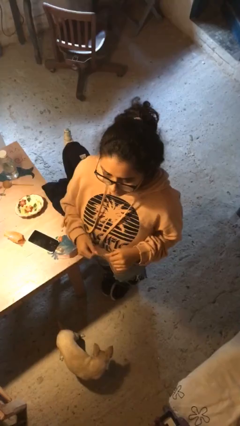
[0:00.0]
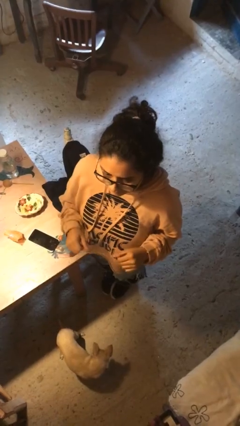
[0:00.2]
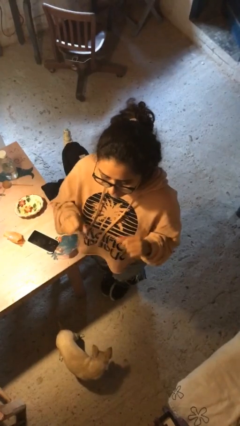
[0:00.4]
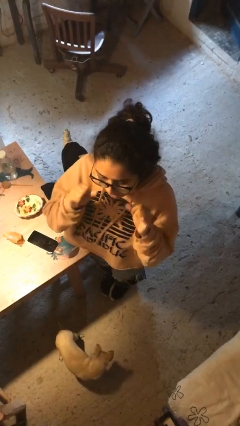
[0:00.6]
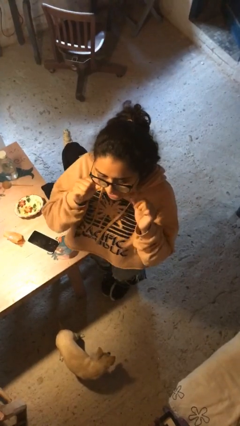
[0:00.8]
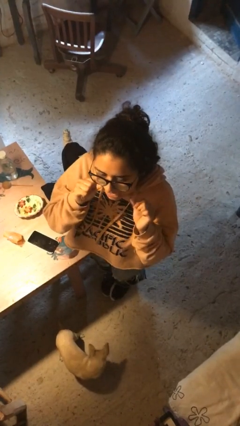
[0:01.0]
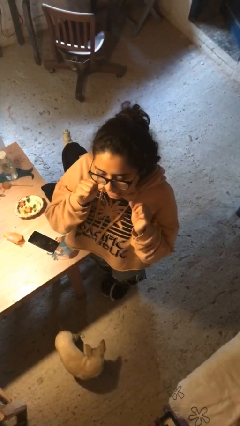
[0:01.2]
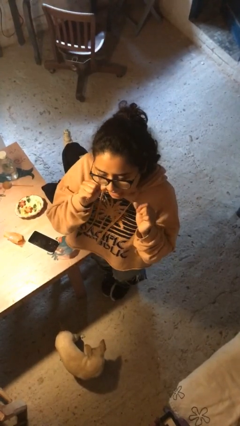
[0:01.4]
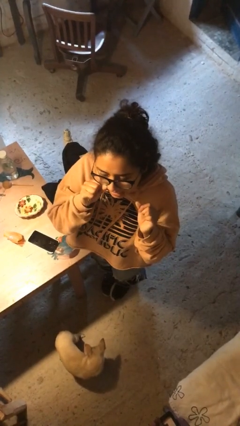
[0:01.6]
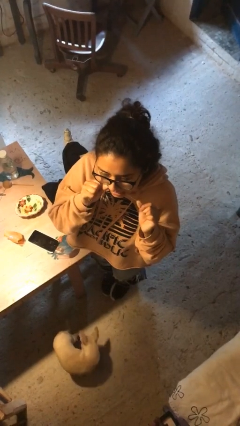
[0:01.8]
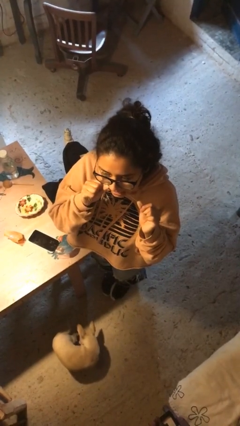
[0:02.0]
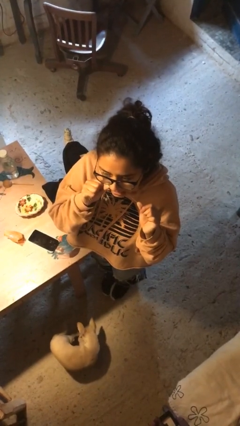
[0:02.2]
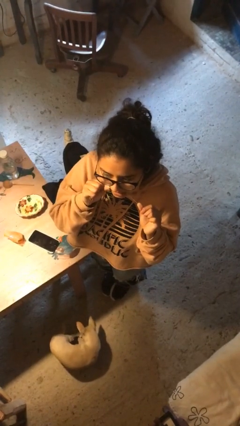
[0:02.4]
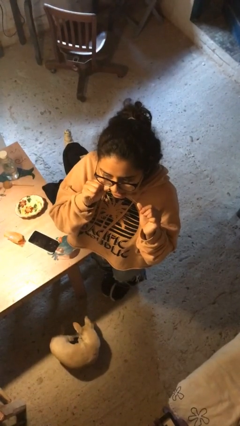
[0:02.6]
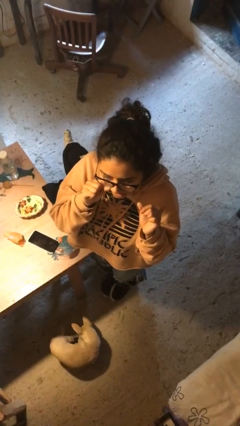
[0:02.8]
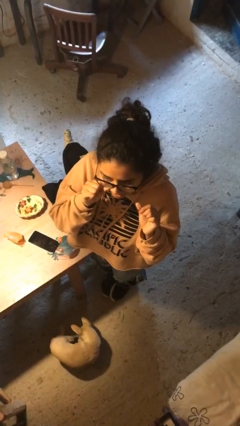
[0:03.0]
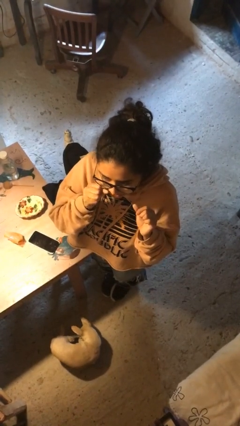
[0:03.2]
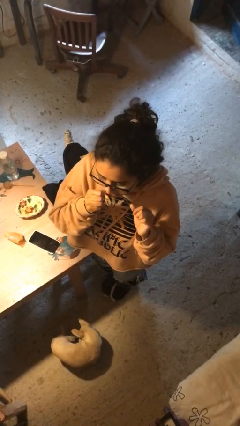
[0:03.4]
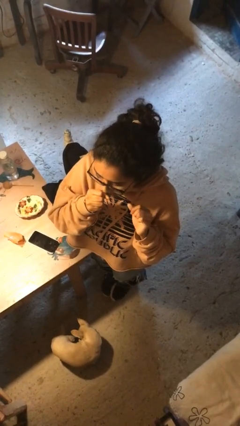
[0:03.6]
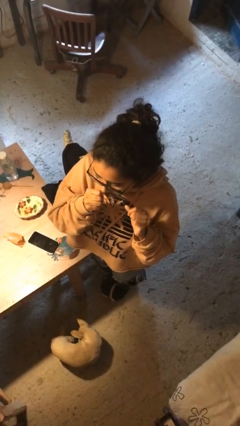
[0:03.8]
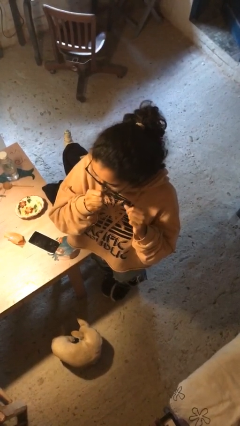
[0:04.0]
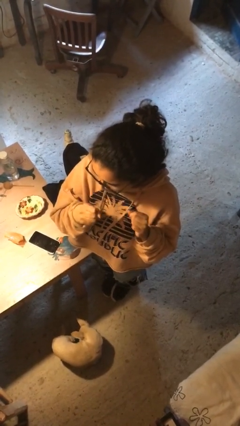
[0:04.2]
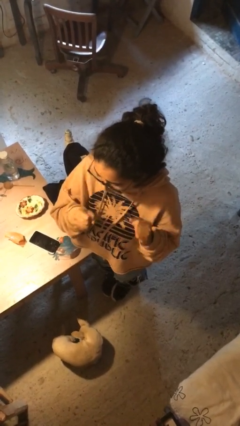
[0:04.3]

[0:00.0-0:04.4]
person flosses

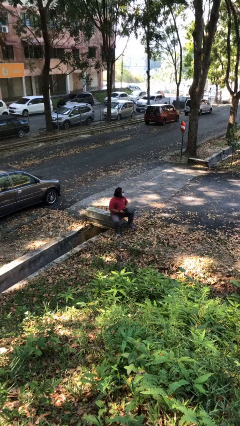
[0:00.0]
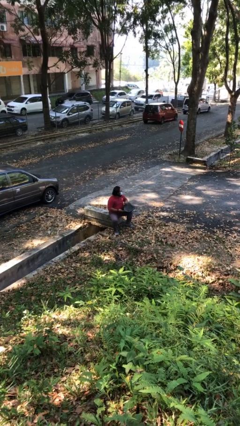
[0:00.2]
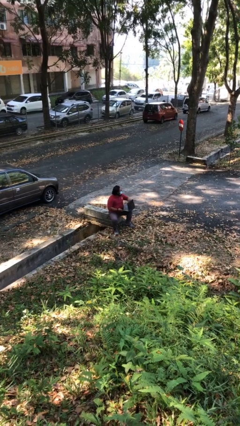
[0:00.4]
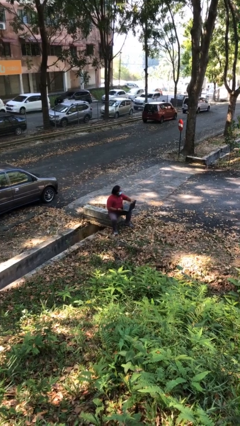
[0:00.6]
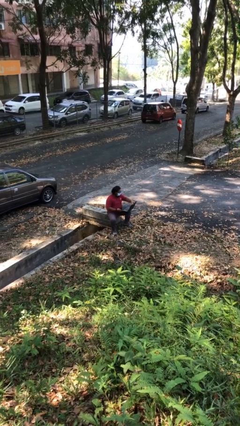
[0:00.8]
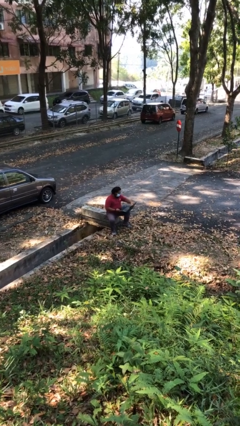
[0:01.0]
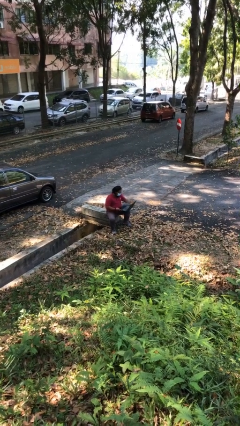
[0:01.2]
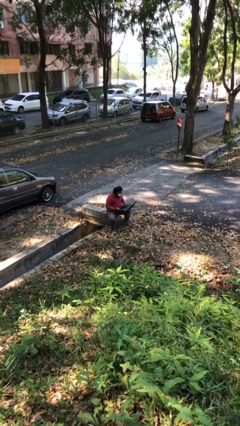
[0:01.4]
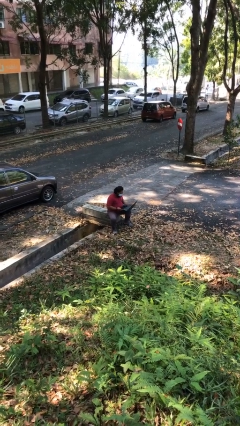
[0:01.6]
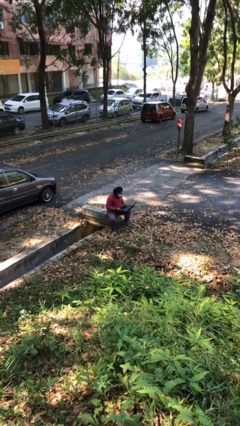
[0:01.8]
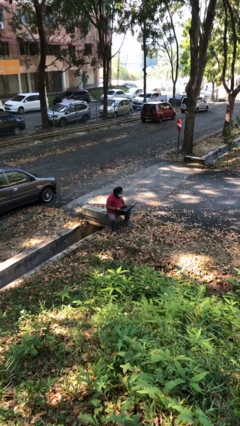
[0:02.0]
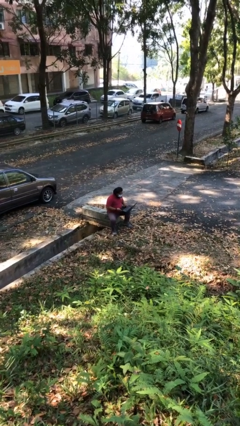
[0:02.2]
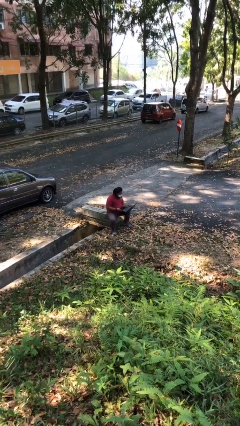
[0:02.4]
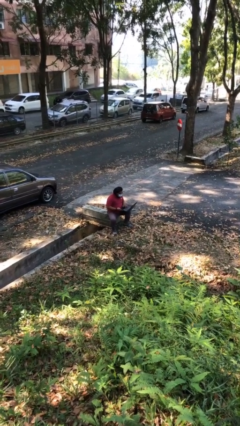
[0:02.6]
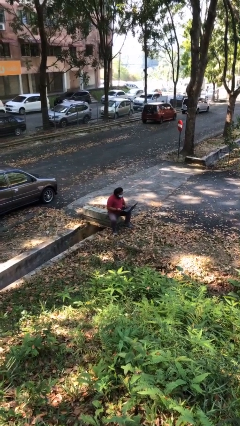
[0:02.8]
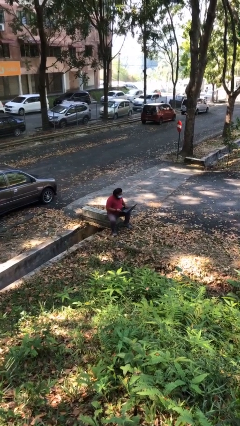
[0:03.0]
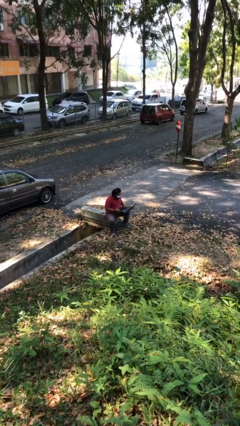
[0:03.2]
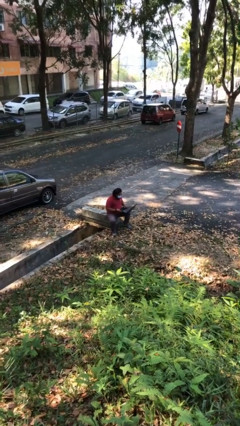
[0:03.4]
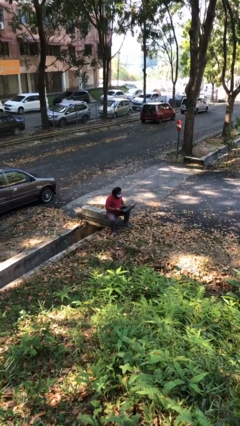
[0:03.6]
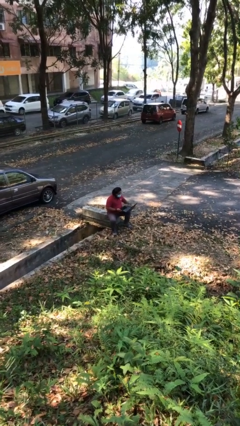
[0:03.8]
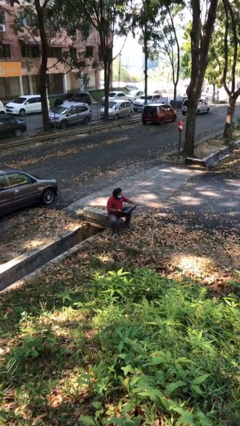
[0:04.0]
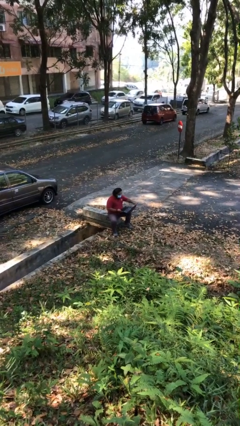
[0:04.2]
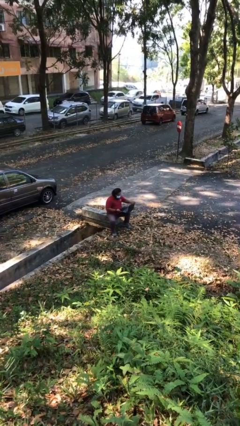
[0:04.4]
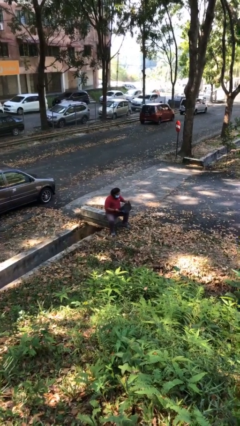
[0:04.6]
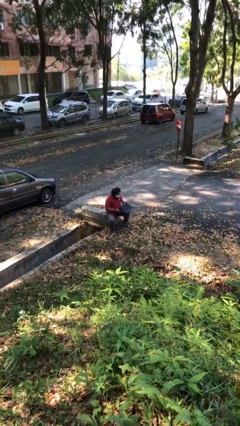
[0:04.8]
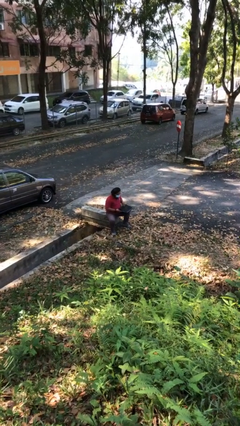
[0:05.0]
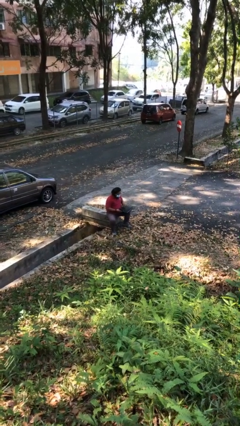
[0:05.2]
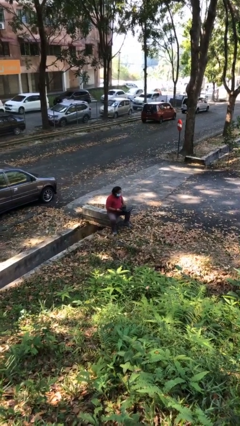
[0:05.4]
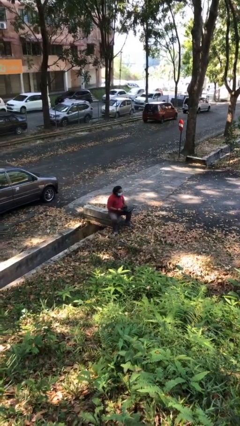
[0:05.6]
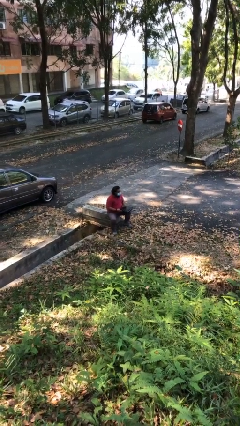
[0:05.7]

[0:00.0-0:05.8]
person interacts with laptop

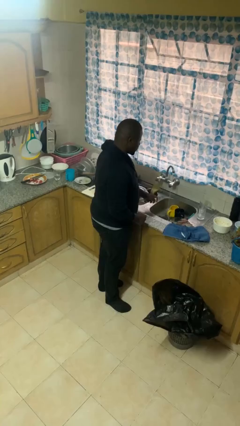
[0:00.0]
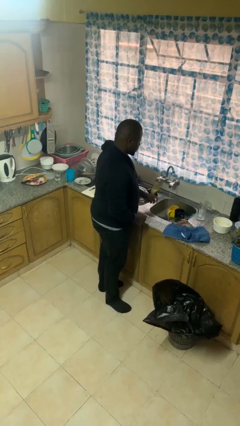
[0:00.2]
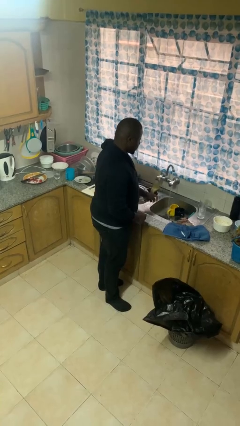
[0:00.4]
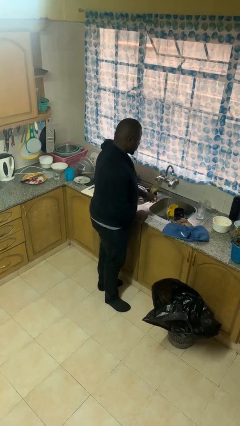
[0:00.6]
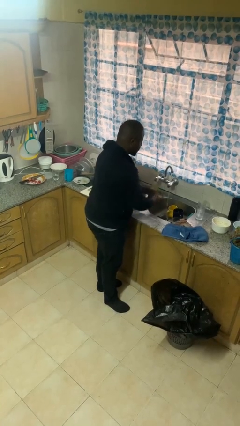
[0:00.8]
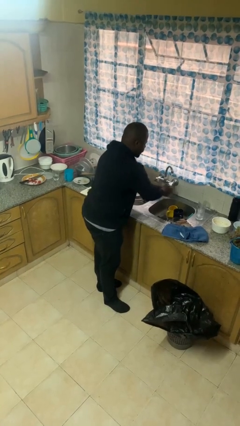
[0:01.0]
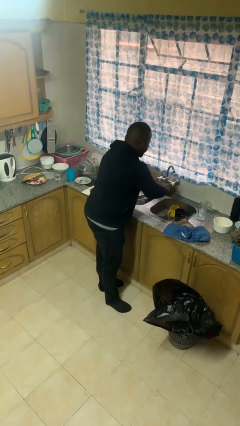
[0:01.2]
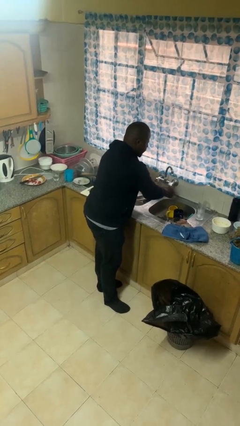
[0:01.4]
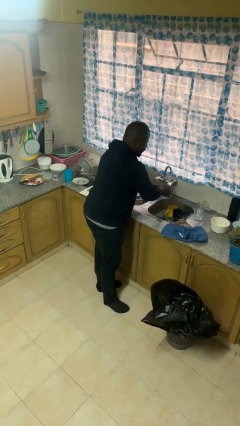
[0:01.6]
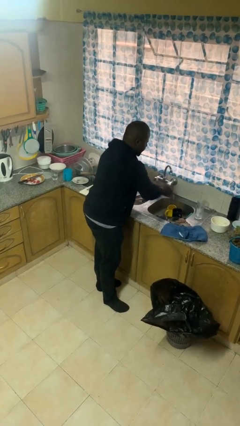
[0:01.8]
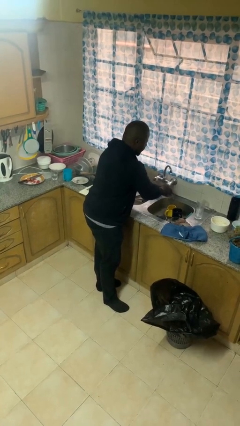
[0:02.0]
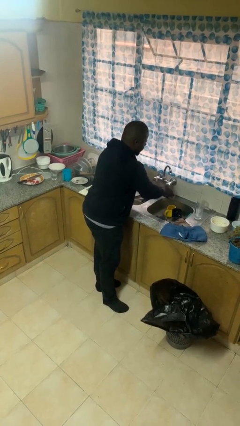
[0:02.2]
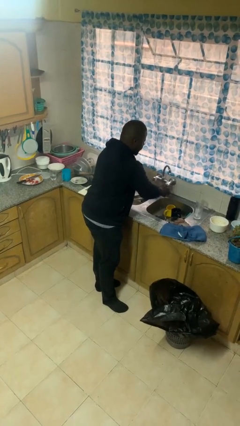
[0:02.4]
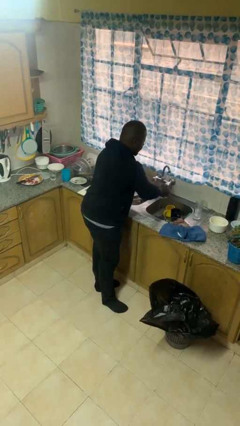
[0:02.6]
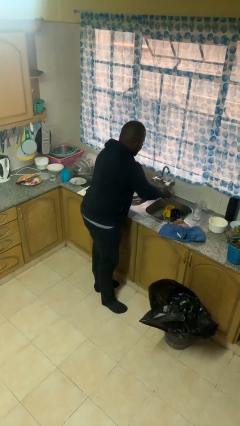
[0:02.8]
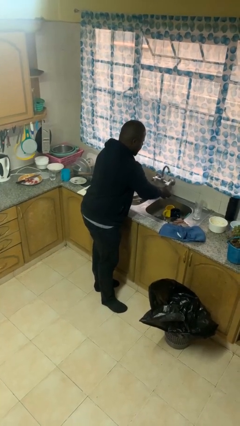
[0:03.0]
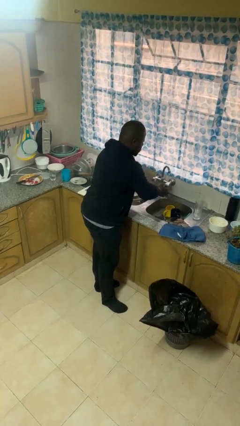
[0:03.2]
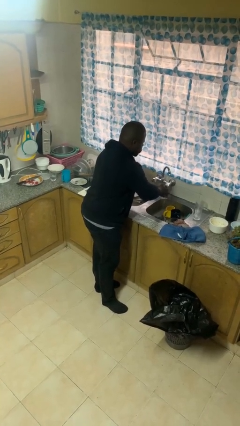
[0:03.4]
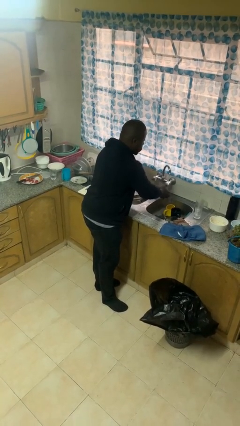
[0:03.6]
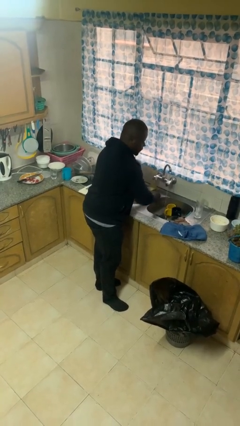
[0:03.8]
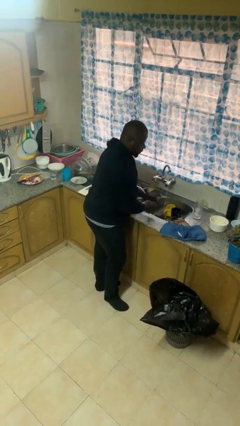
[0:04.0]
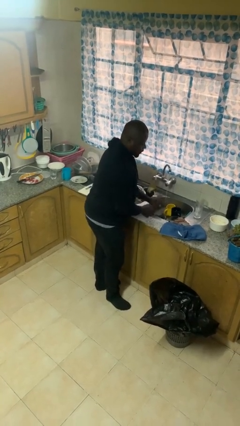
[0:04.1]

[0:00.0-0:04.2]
person washes hands

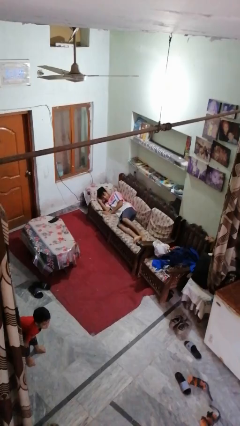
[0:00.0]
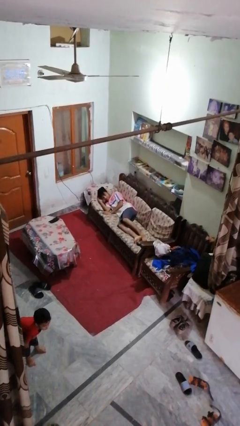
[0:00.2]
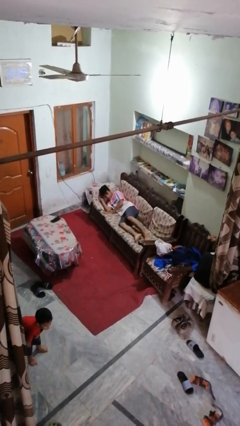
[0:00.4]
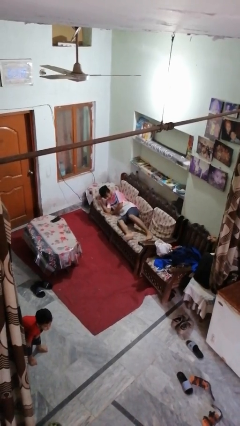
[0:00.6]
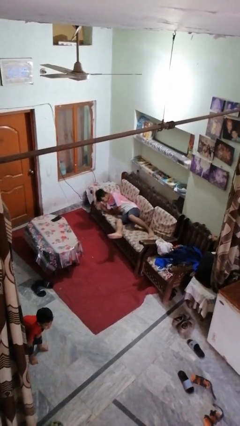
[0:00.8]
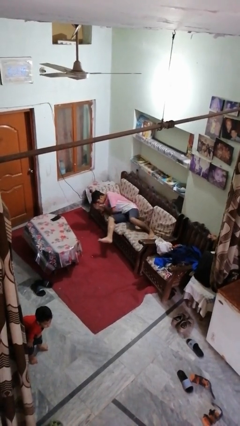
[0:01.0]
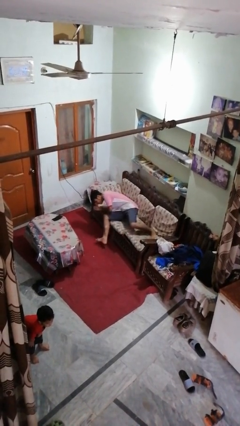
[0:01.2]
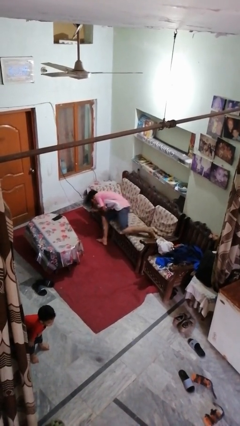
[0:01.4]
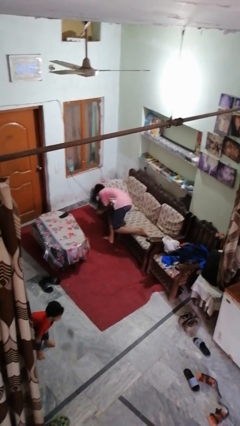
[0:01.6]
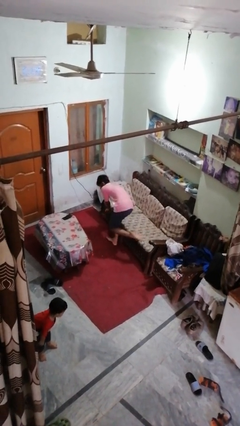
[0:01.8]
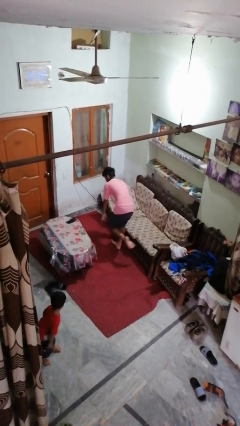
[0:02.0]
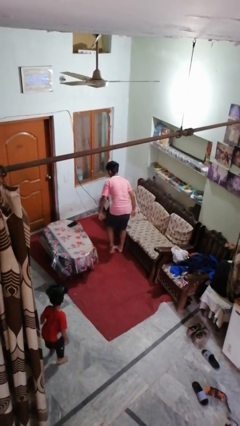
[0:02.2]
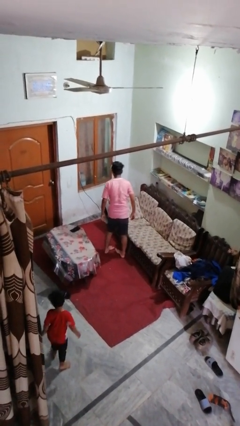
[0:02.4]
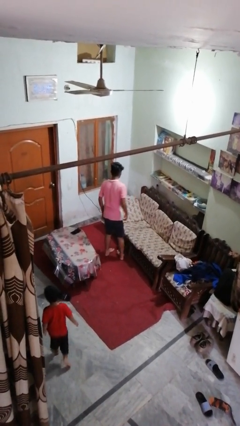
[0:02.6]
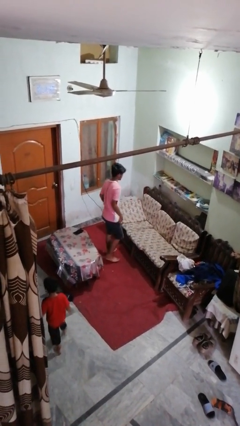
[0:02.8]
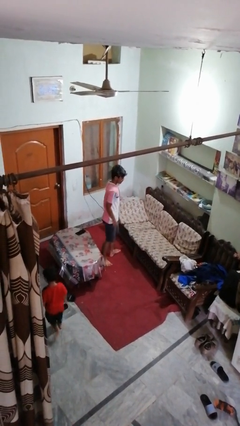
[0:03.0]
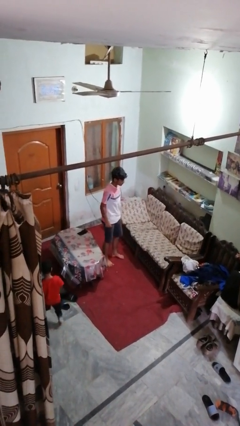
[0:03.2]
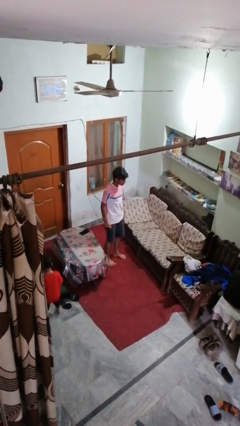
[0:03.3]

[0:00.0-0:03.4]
person stands up

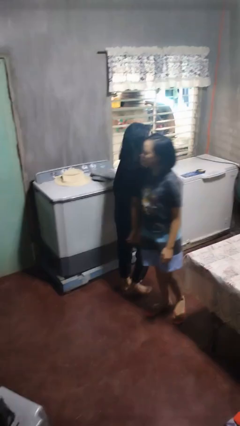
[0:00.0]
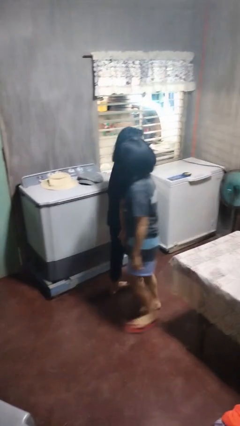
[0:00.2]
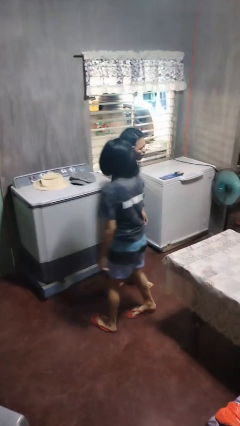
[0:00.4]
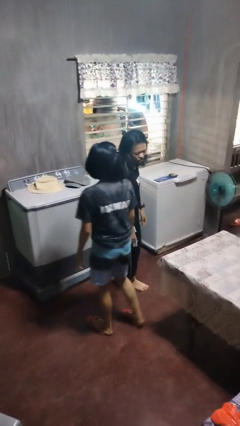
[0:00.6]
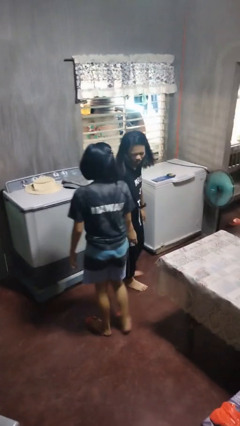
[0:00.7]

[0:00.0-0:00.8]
person bumps into person
